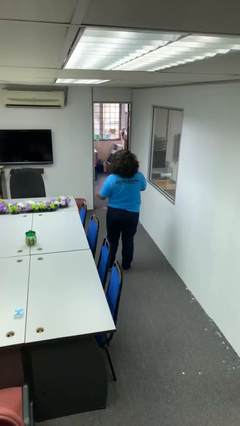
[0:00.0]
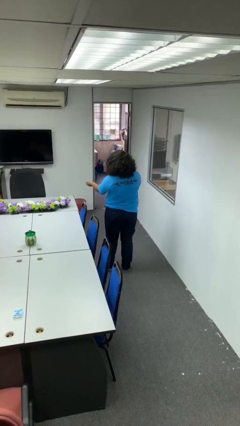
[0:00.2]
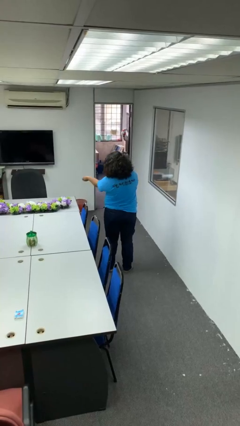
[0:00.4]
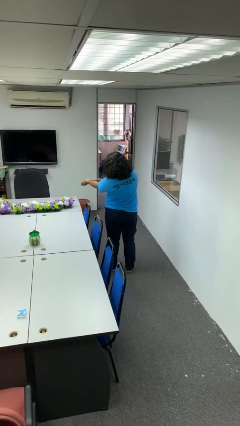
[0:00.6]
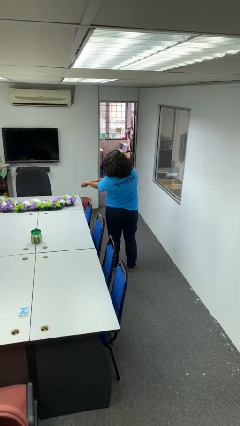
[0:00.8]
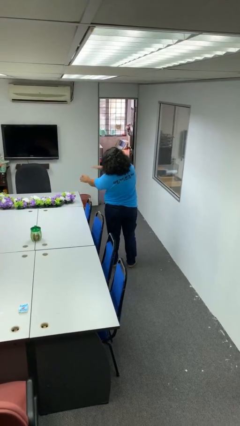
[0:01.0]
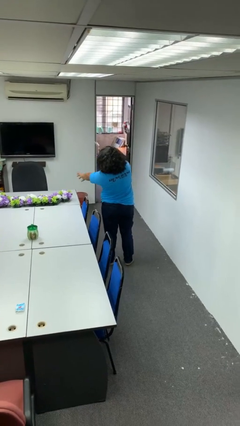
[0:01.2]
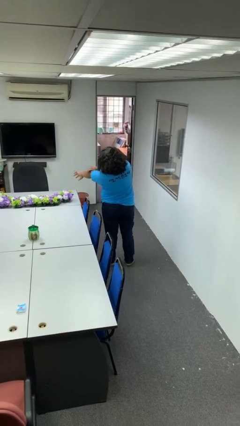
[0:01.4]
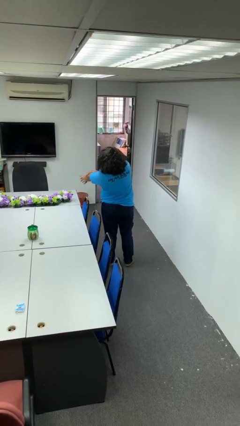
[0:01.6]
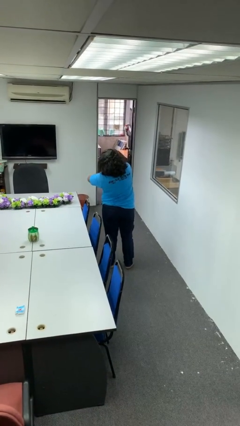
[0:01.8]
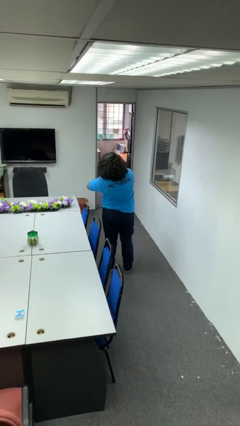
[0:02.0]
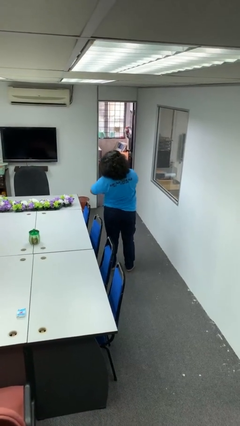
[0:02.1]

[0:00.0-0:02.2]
person swats bug

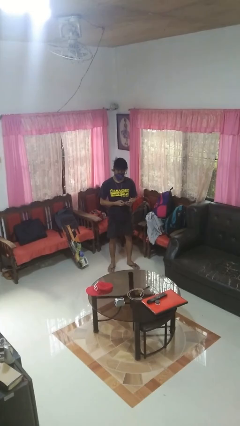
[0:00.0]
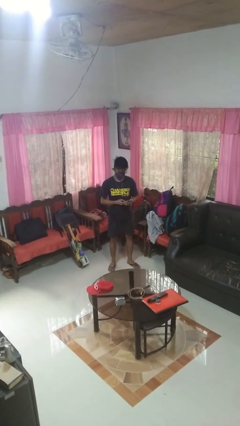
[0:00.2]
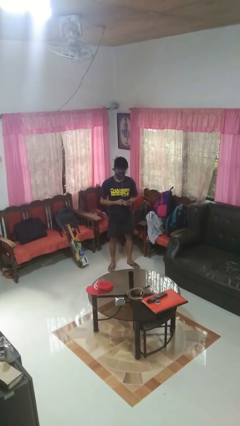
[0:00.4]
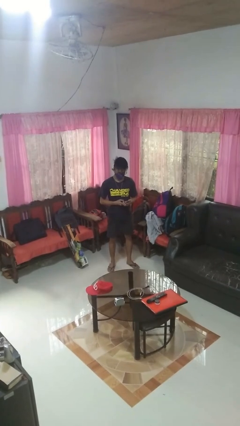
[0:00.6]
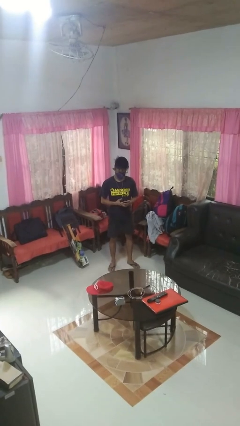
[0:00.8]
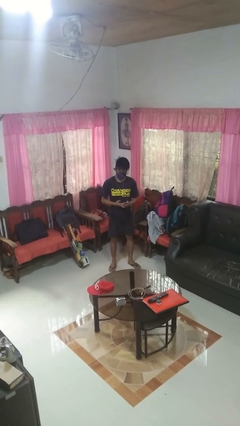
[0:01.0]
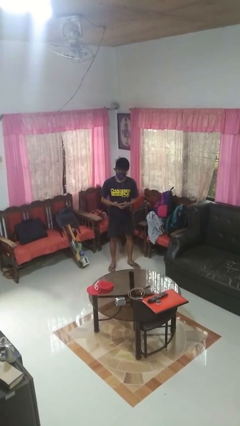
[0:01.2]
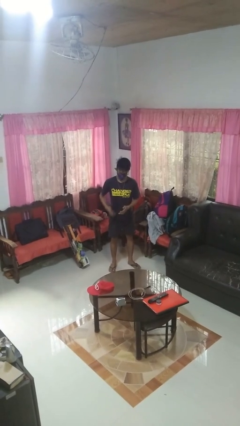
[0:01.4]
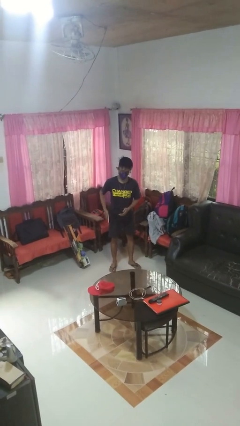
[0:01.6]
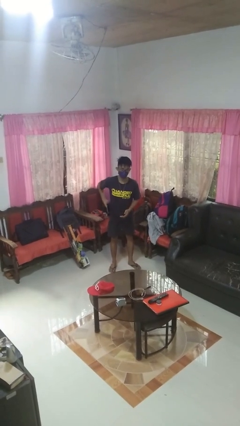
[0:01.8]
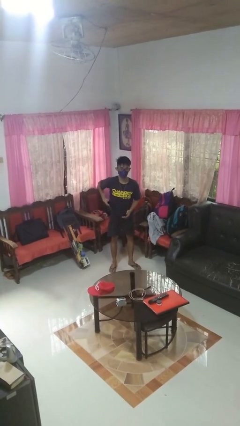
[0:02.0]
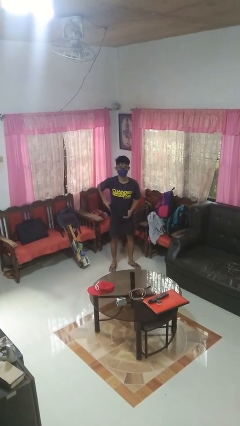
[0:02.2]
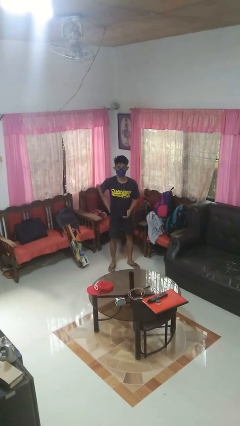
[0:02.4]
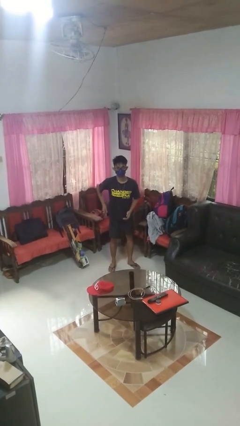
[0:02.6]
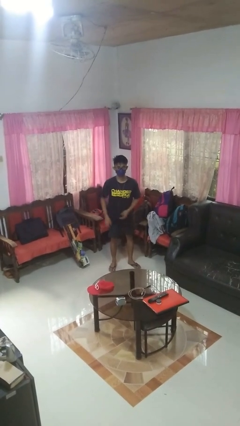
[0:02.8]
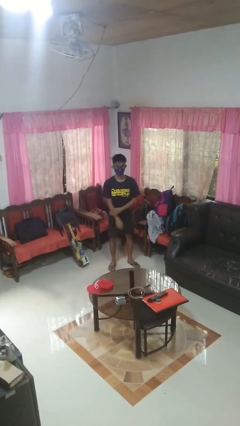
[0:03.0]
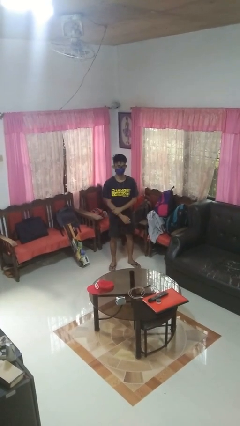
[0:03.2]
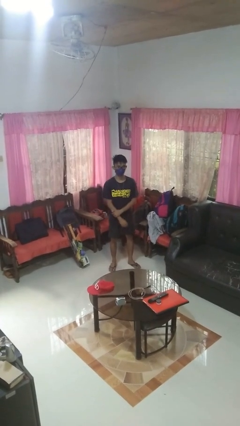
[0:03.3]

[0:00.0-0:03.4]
person puts phone into pocket

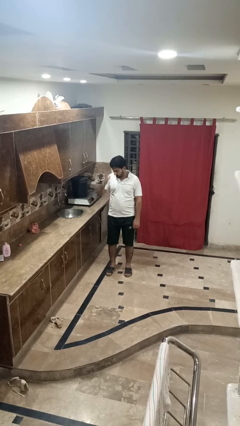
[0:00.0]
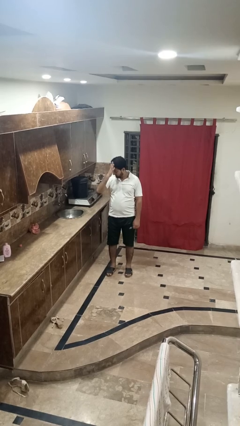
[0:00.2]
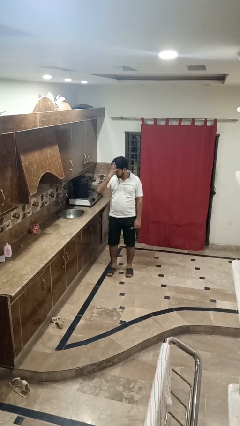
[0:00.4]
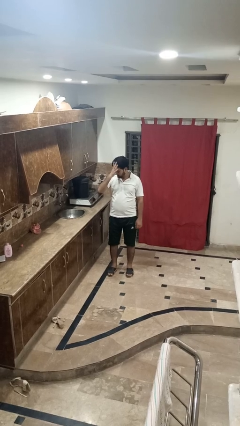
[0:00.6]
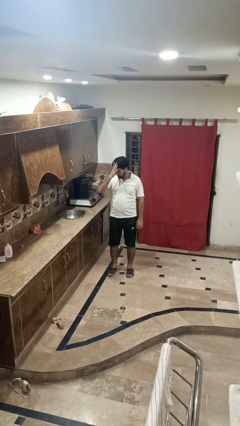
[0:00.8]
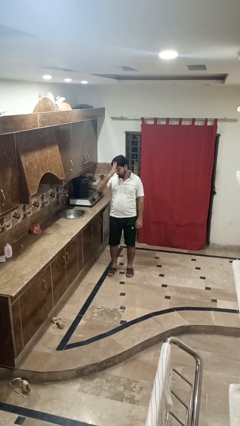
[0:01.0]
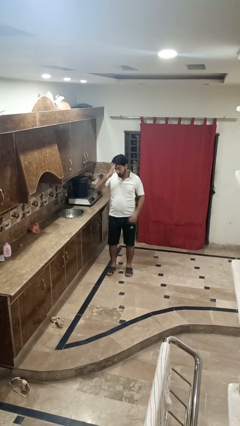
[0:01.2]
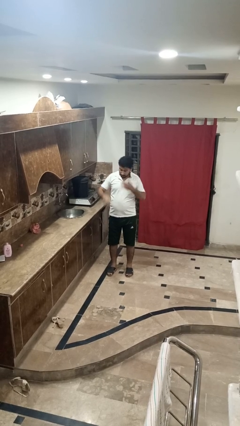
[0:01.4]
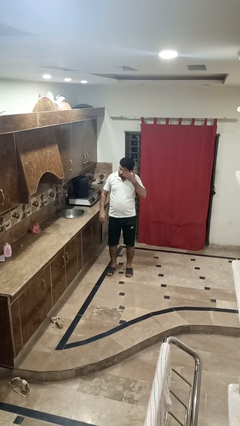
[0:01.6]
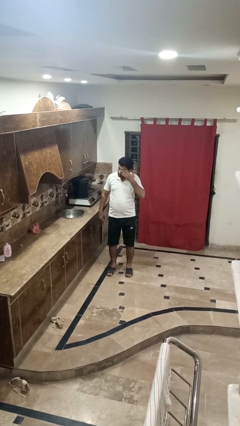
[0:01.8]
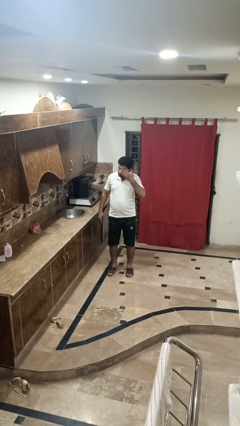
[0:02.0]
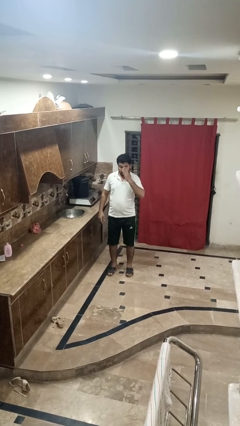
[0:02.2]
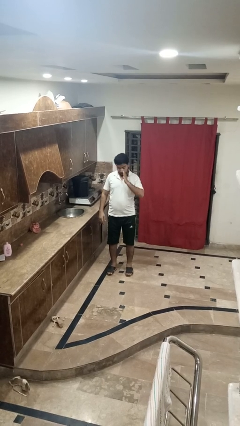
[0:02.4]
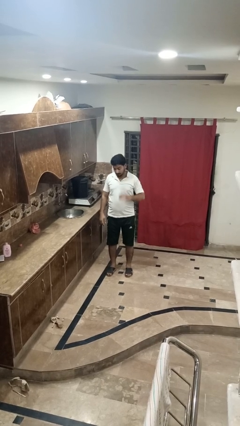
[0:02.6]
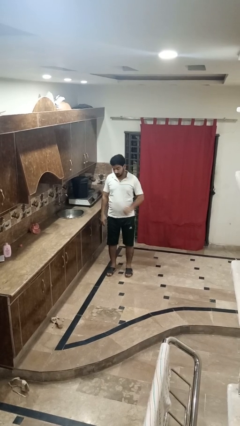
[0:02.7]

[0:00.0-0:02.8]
person rubs eyes

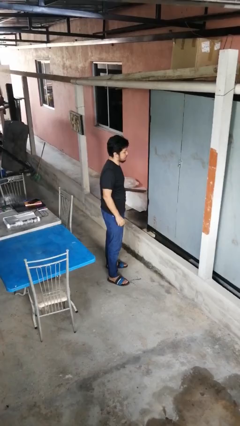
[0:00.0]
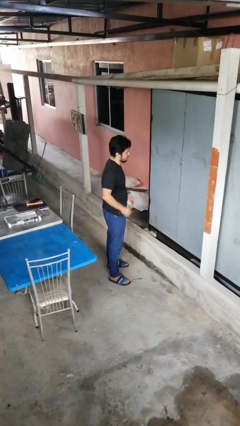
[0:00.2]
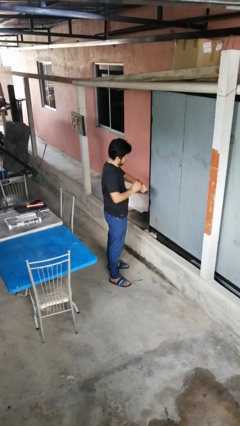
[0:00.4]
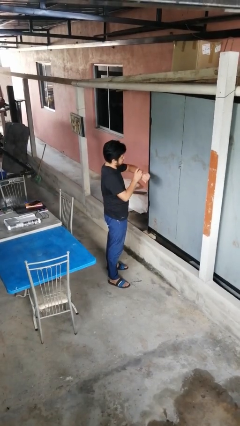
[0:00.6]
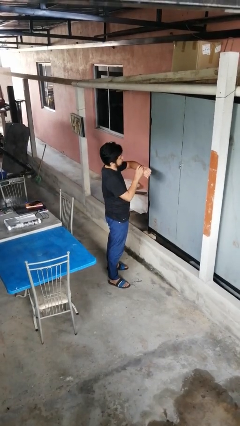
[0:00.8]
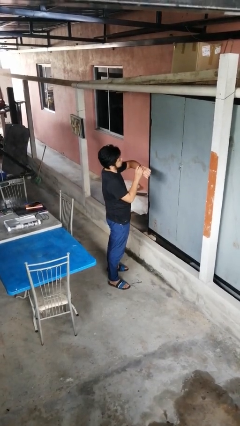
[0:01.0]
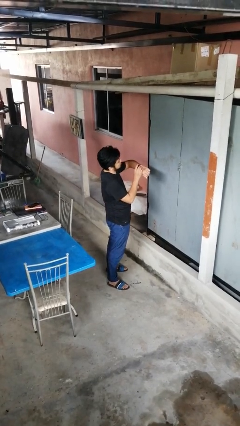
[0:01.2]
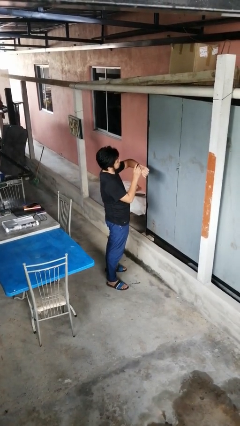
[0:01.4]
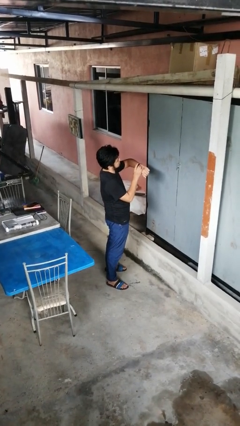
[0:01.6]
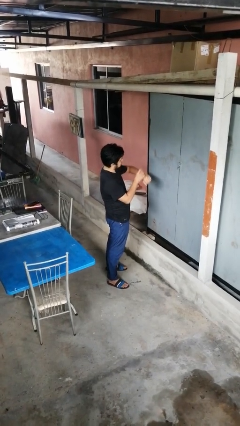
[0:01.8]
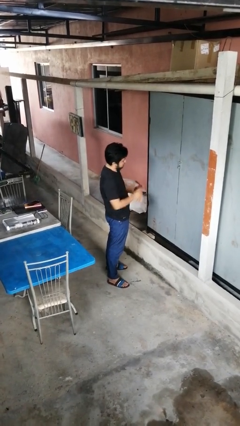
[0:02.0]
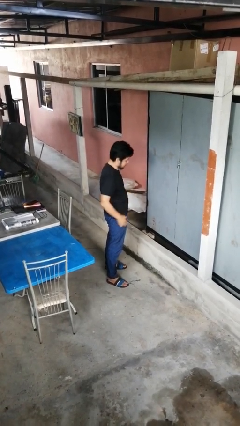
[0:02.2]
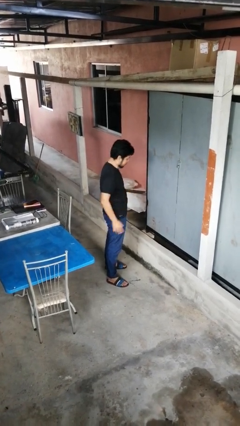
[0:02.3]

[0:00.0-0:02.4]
person looks at wristwatch

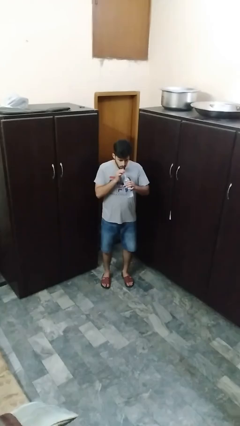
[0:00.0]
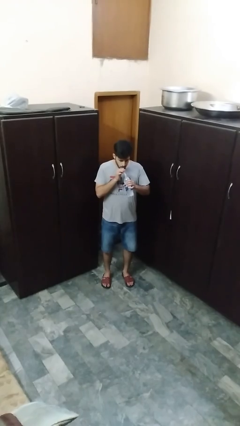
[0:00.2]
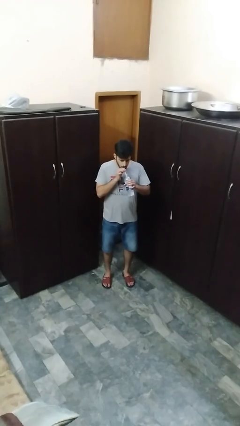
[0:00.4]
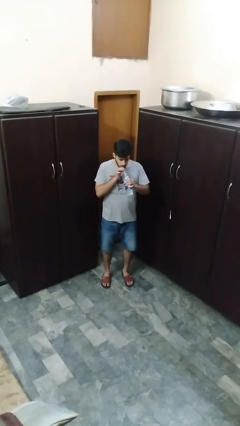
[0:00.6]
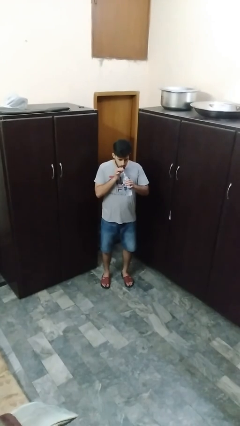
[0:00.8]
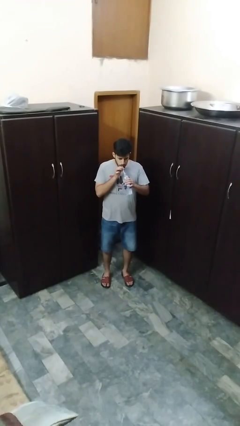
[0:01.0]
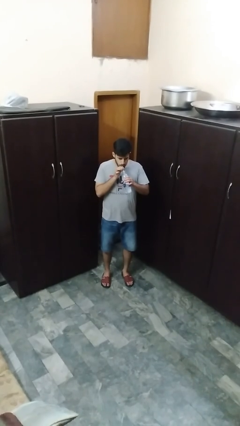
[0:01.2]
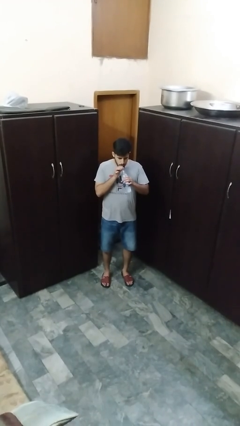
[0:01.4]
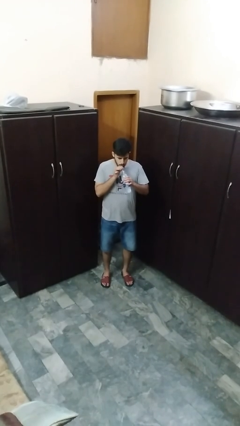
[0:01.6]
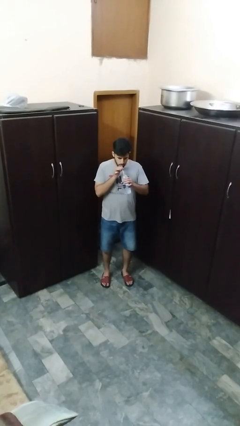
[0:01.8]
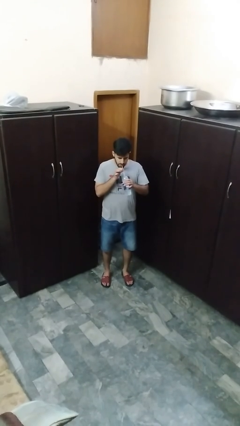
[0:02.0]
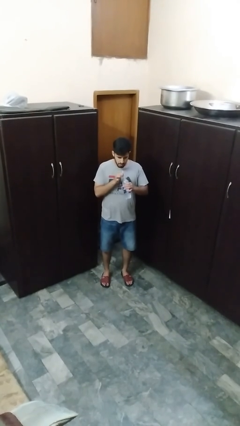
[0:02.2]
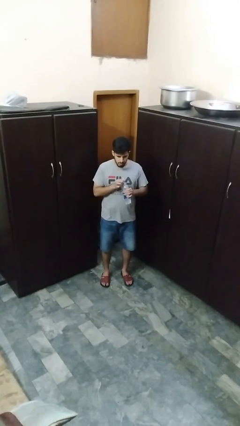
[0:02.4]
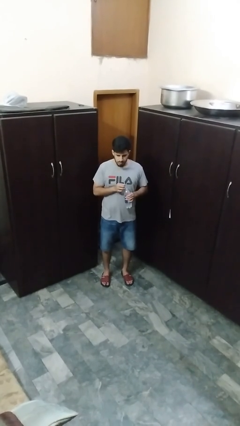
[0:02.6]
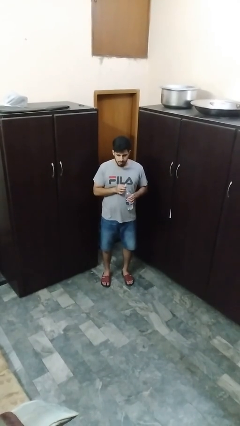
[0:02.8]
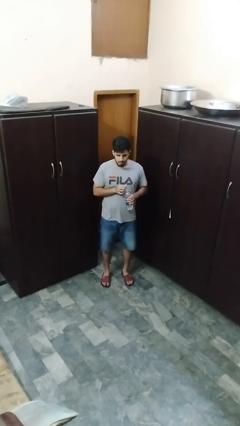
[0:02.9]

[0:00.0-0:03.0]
person drinks from straw

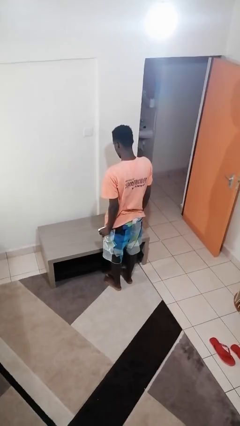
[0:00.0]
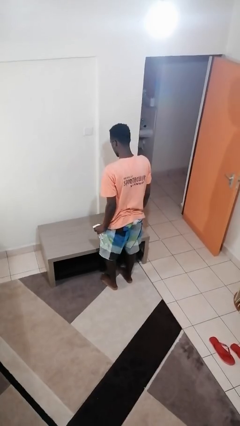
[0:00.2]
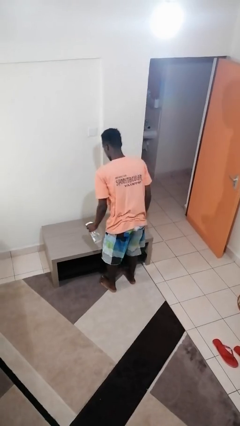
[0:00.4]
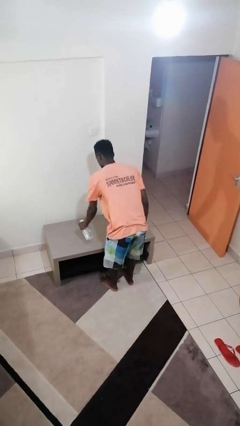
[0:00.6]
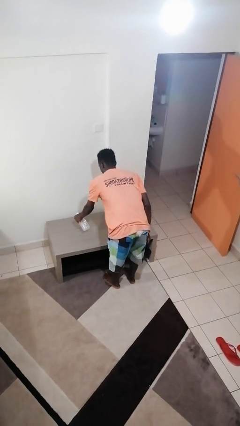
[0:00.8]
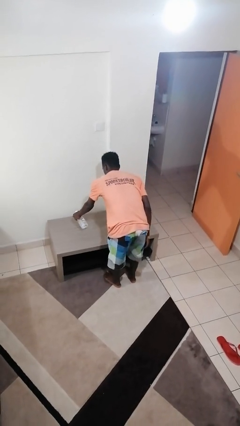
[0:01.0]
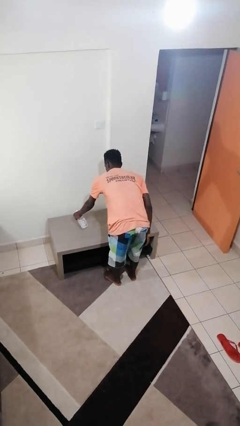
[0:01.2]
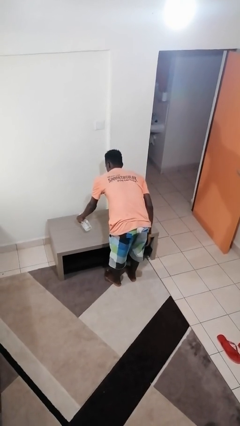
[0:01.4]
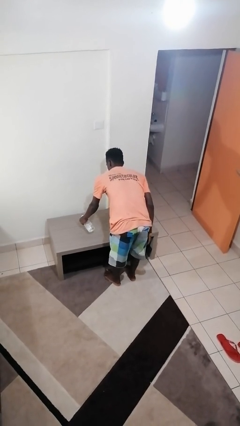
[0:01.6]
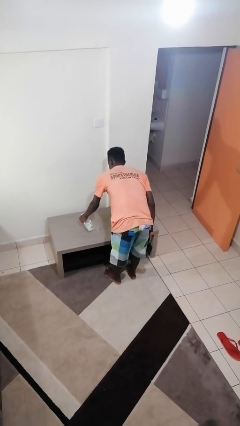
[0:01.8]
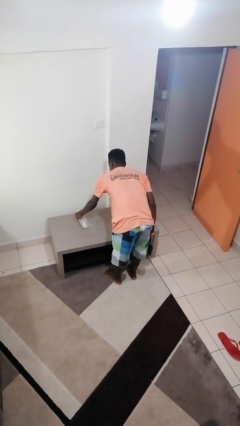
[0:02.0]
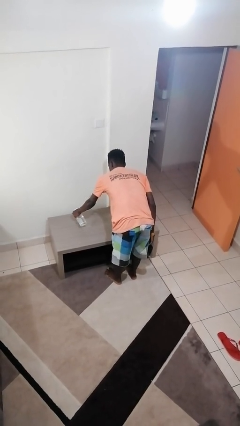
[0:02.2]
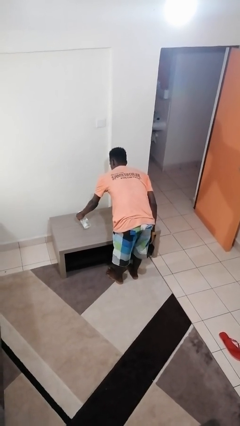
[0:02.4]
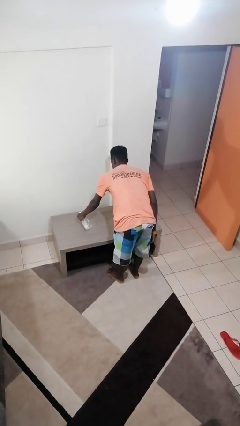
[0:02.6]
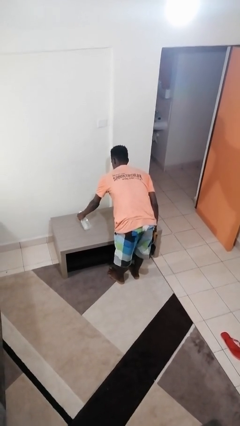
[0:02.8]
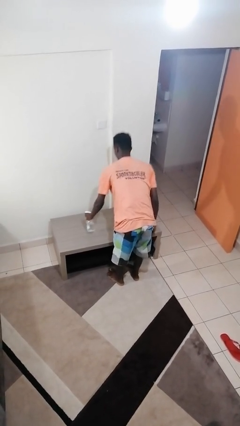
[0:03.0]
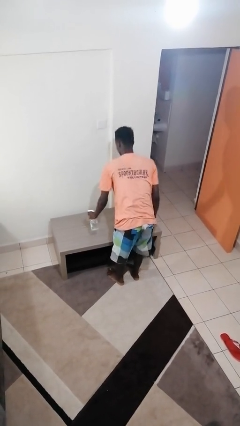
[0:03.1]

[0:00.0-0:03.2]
person sprays from bottle

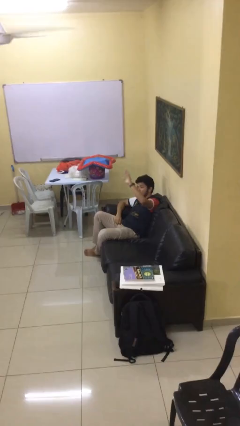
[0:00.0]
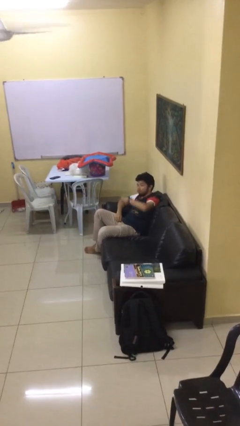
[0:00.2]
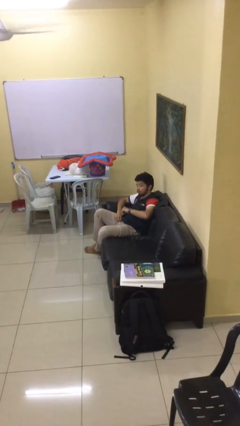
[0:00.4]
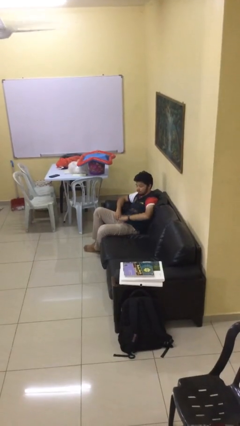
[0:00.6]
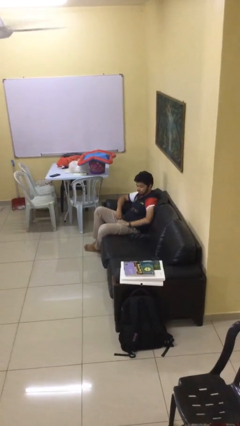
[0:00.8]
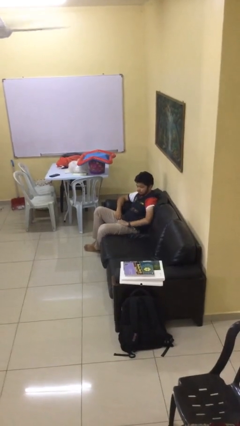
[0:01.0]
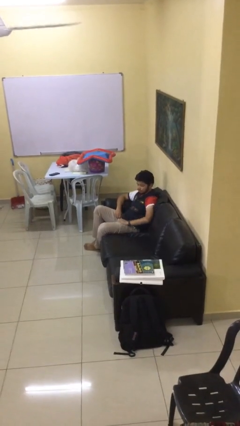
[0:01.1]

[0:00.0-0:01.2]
person gestures swipe down
